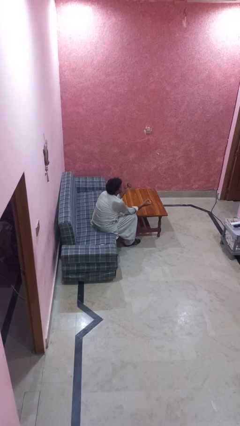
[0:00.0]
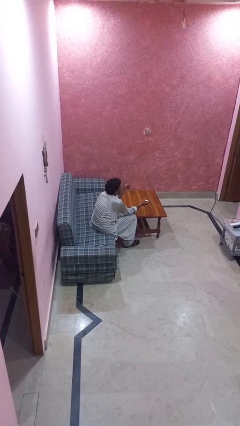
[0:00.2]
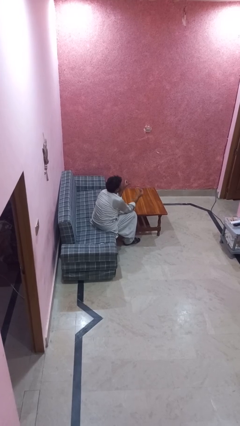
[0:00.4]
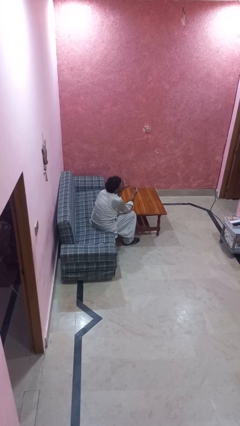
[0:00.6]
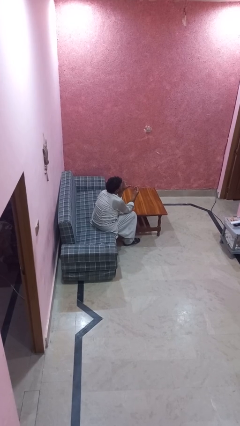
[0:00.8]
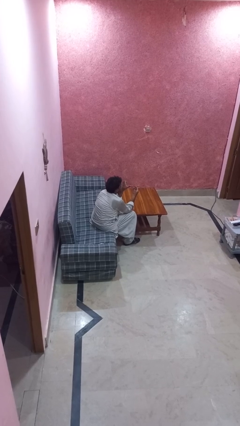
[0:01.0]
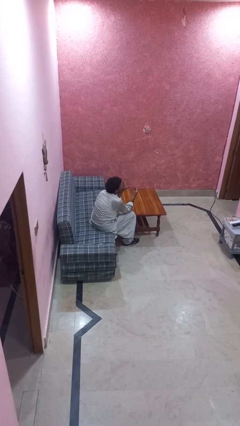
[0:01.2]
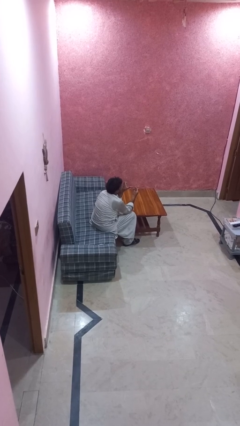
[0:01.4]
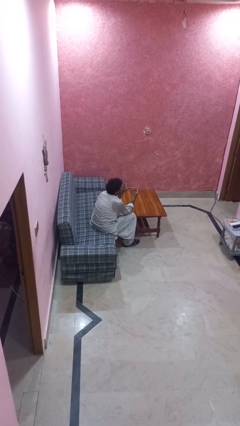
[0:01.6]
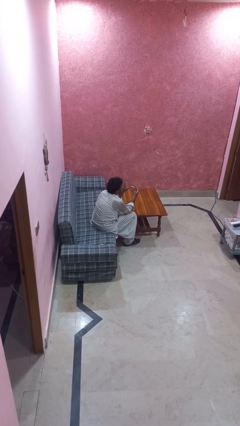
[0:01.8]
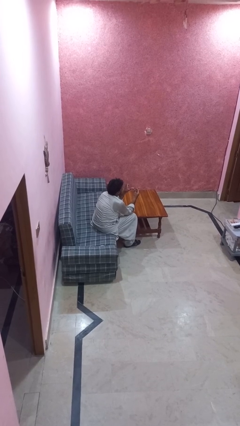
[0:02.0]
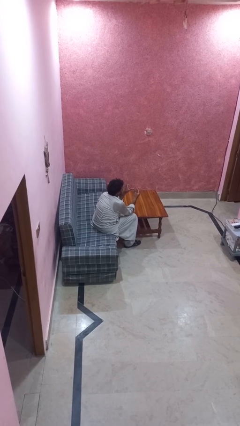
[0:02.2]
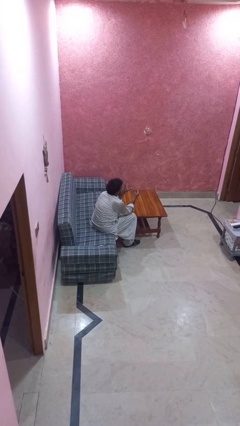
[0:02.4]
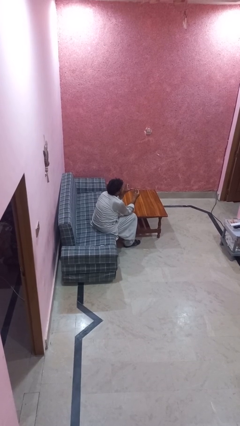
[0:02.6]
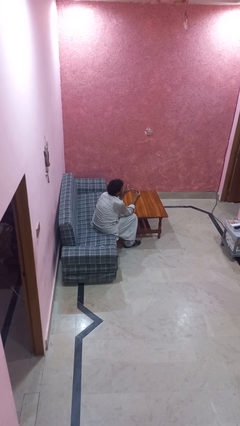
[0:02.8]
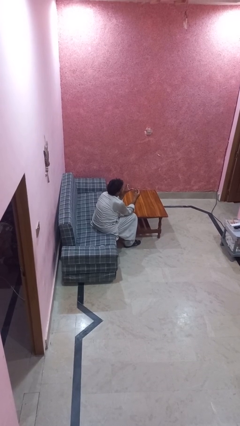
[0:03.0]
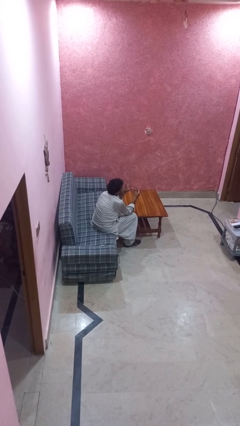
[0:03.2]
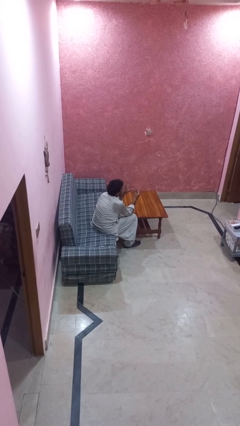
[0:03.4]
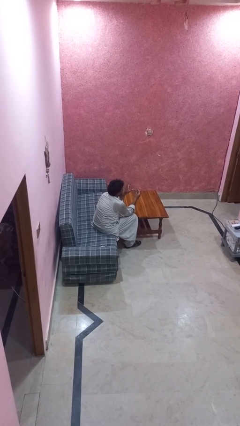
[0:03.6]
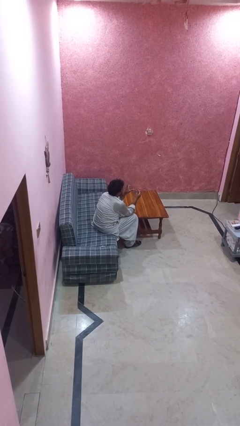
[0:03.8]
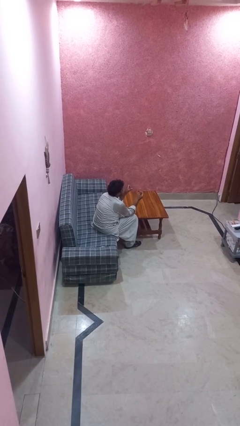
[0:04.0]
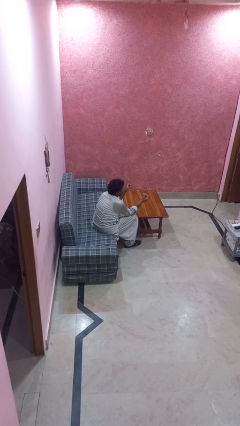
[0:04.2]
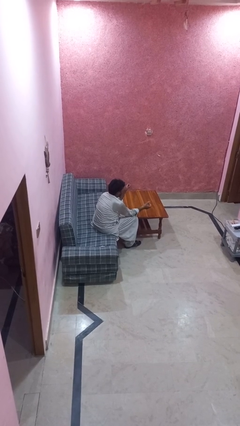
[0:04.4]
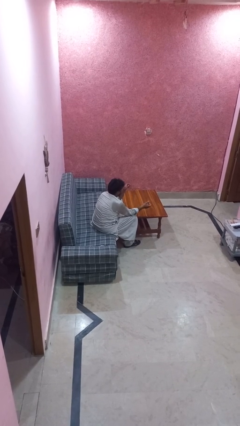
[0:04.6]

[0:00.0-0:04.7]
person clips fingernails

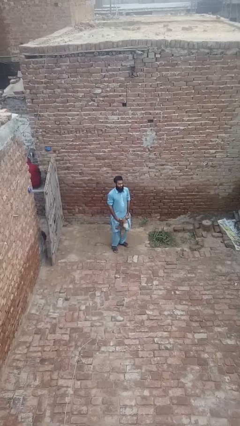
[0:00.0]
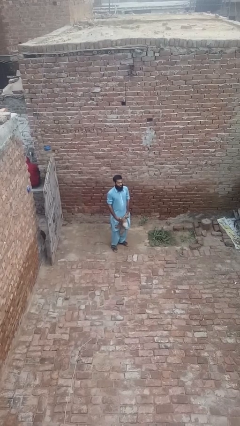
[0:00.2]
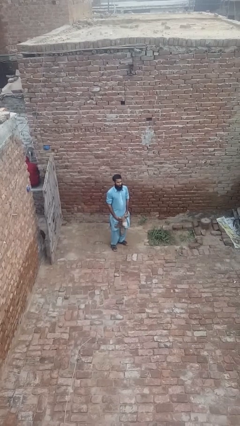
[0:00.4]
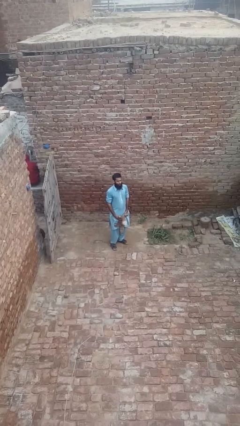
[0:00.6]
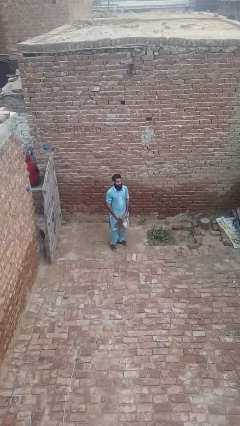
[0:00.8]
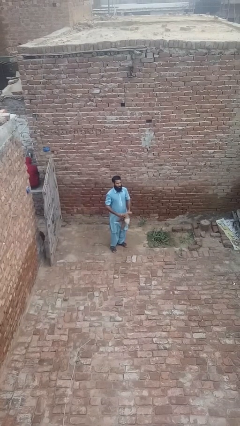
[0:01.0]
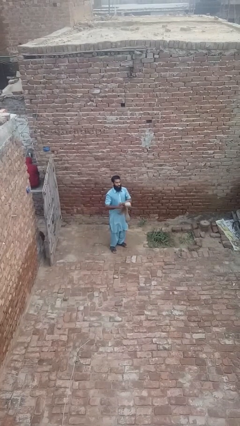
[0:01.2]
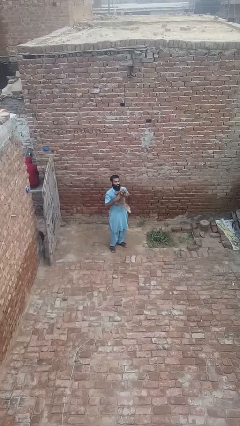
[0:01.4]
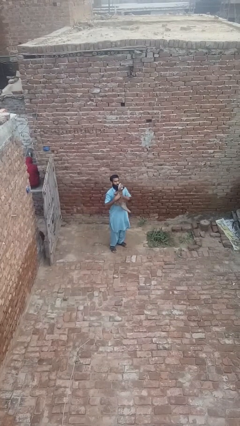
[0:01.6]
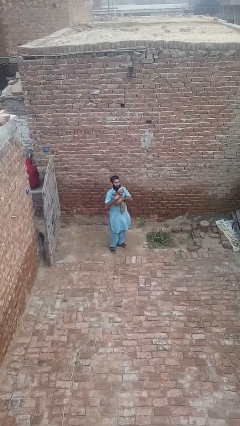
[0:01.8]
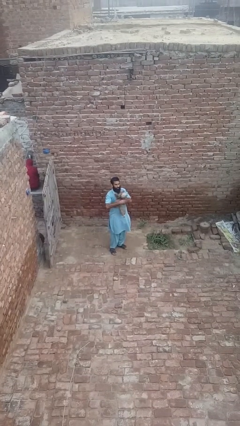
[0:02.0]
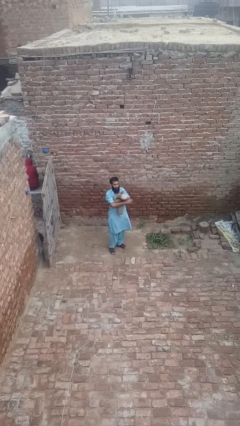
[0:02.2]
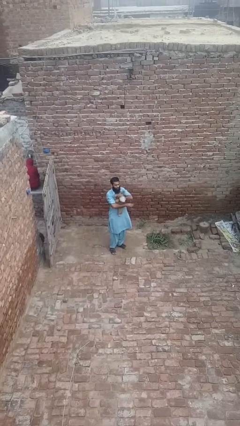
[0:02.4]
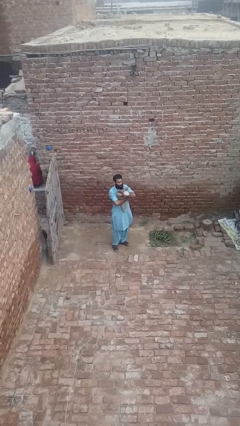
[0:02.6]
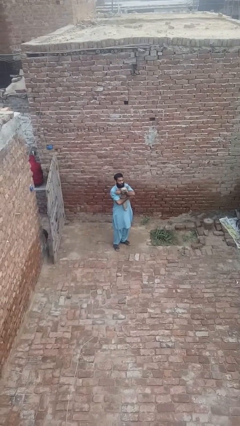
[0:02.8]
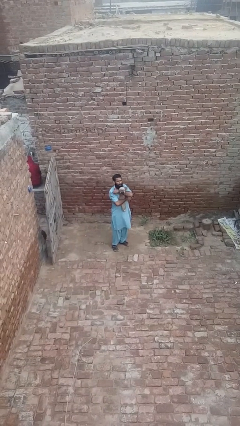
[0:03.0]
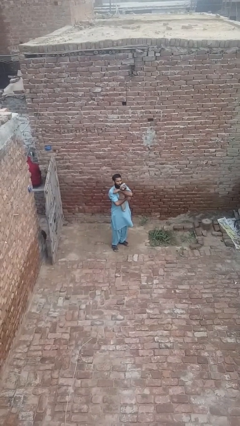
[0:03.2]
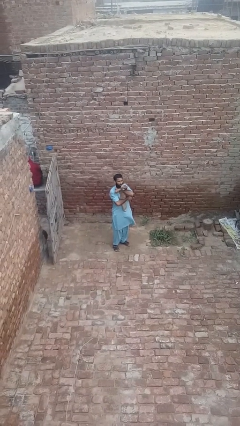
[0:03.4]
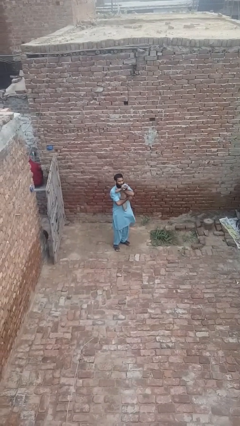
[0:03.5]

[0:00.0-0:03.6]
person hugs stuffed animal

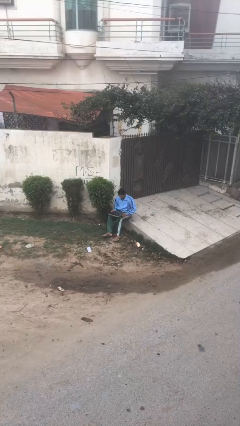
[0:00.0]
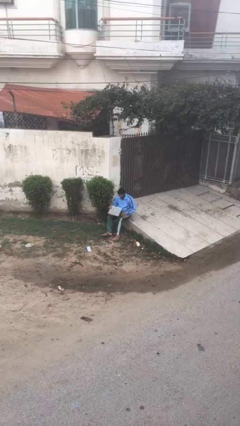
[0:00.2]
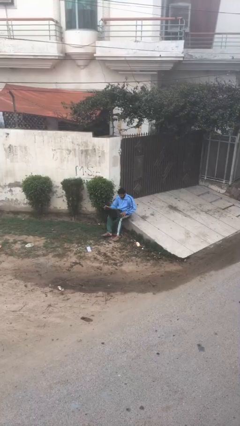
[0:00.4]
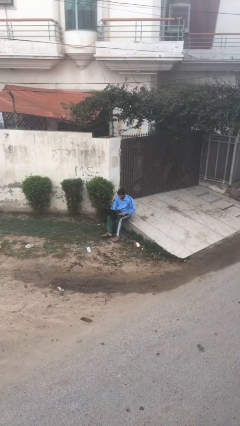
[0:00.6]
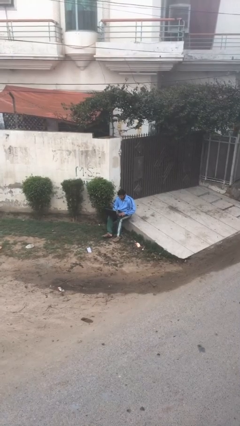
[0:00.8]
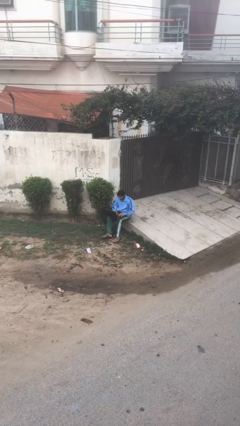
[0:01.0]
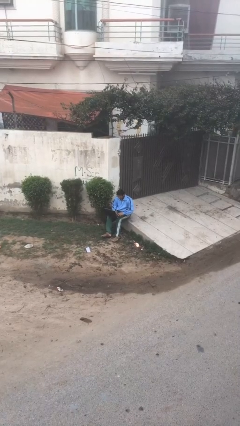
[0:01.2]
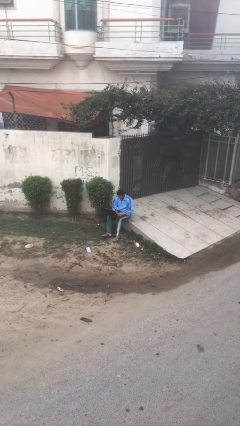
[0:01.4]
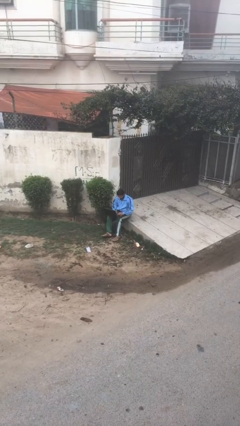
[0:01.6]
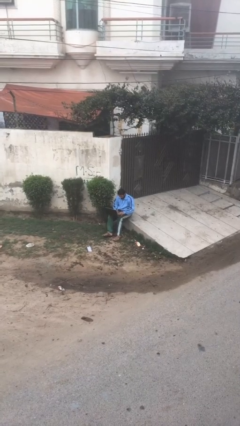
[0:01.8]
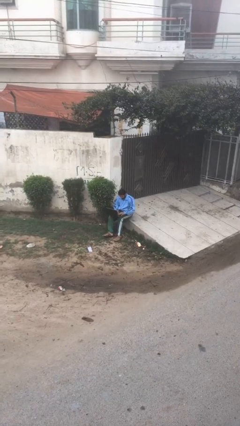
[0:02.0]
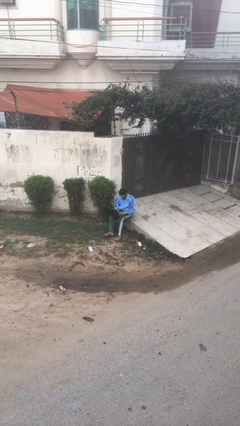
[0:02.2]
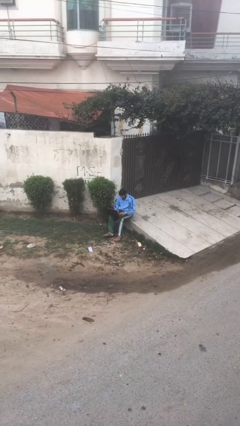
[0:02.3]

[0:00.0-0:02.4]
person interacts with laptop

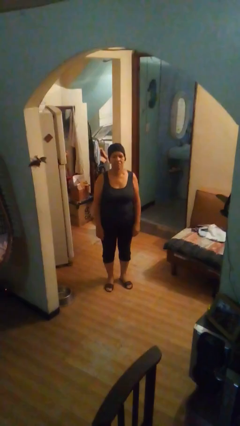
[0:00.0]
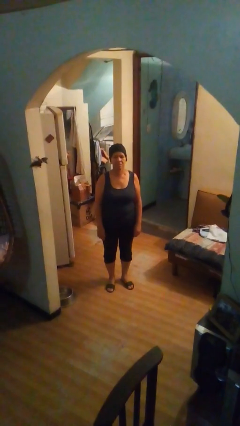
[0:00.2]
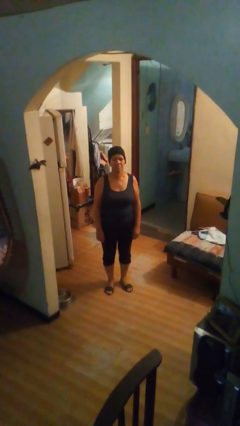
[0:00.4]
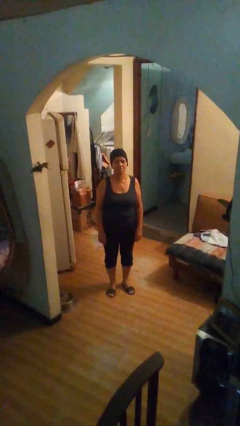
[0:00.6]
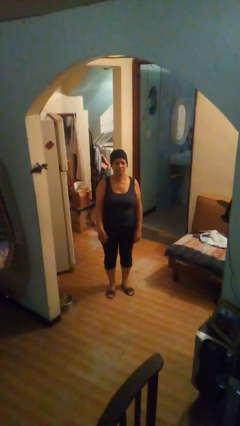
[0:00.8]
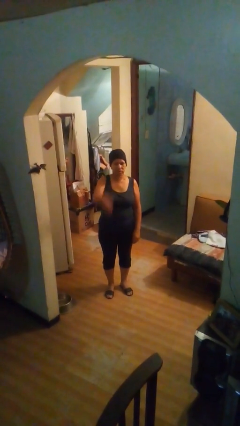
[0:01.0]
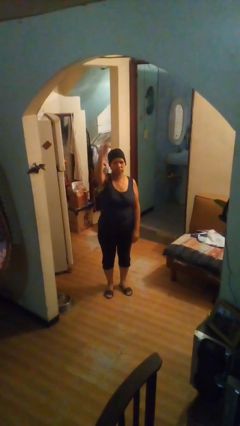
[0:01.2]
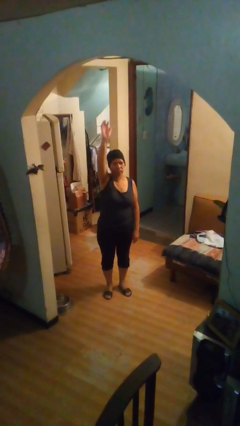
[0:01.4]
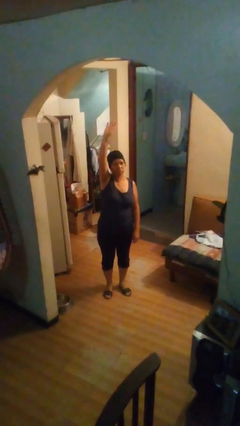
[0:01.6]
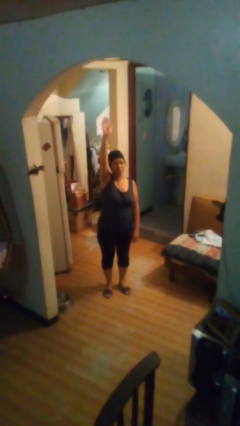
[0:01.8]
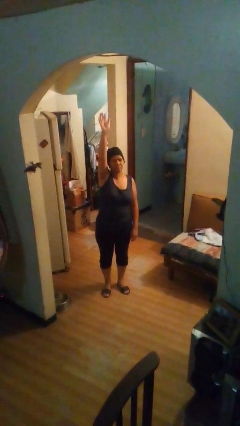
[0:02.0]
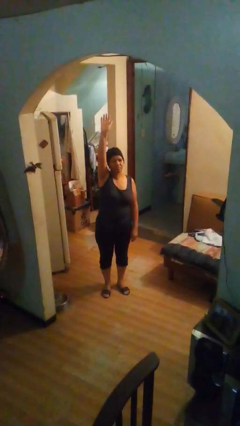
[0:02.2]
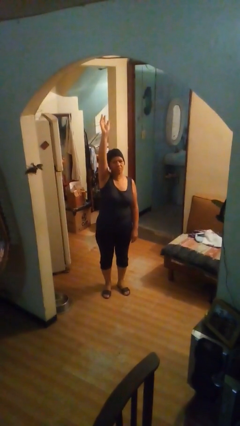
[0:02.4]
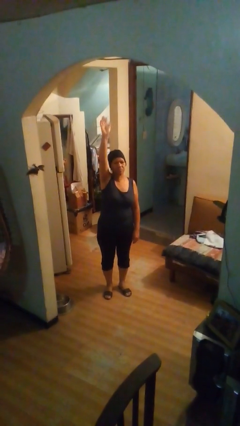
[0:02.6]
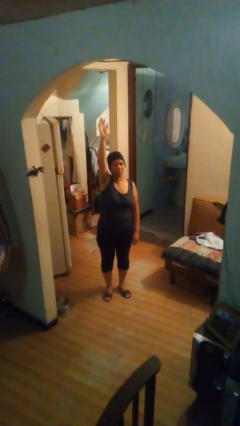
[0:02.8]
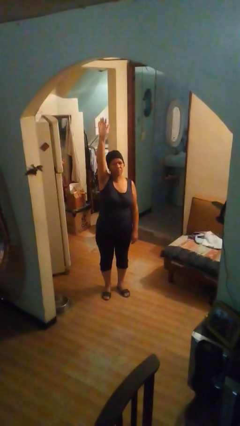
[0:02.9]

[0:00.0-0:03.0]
person gestures raise hand

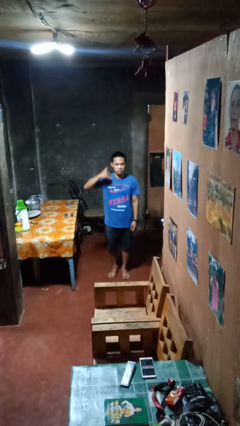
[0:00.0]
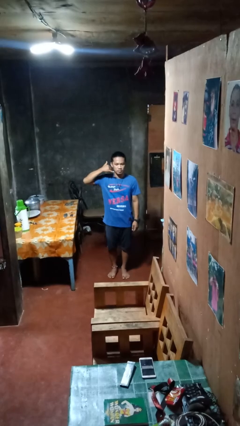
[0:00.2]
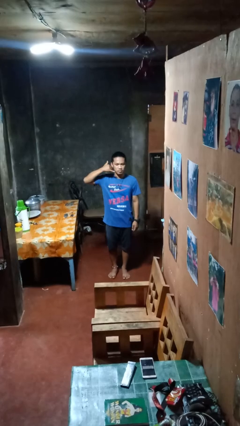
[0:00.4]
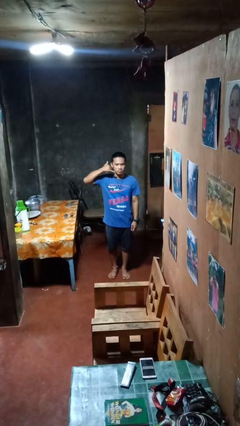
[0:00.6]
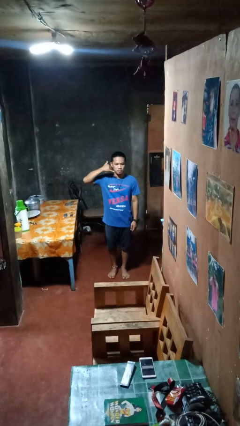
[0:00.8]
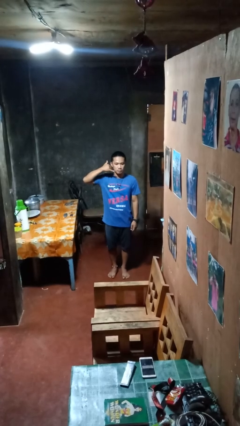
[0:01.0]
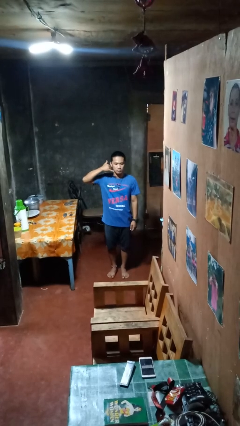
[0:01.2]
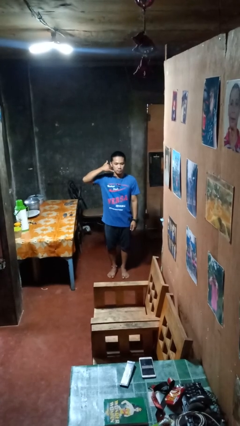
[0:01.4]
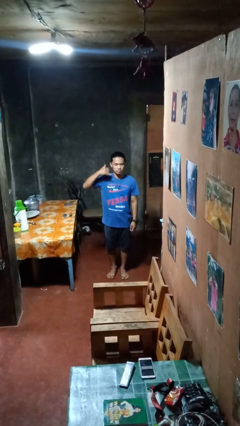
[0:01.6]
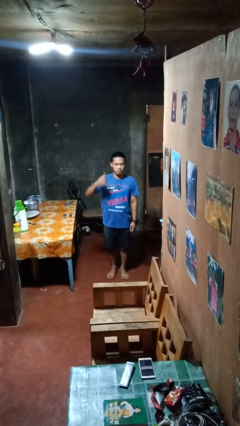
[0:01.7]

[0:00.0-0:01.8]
person gestures call me

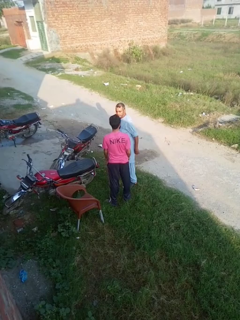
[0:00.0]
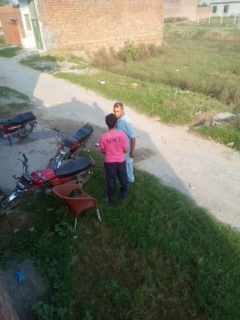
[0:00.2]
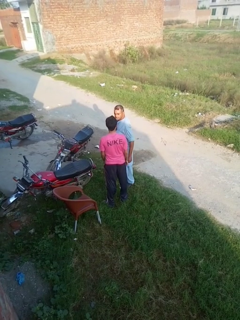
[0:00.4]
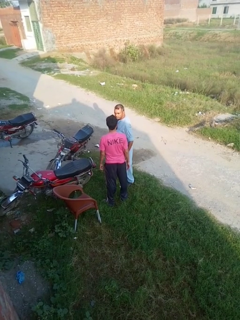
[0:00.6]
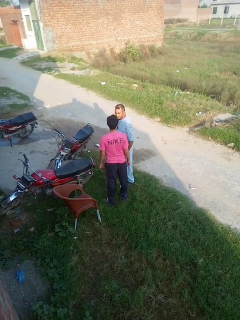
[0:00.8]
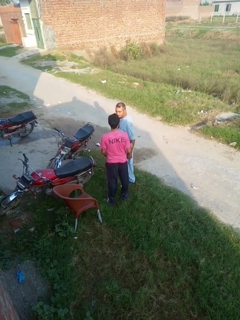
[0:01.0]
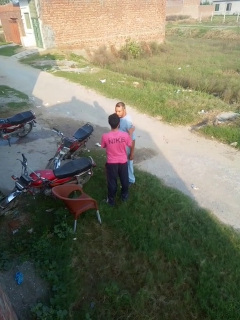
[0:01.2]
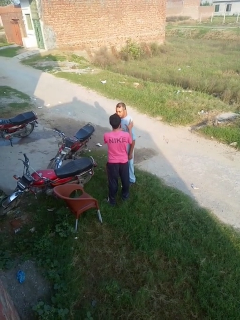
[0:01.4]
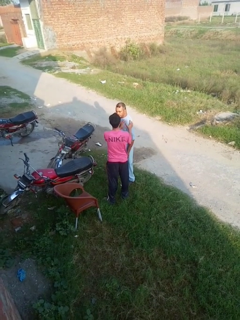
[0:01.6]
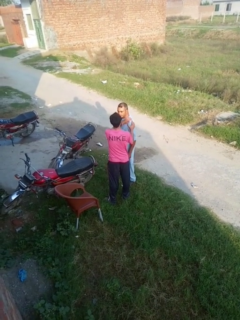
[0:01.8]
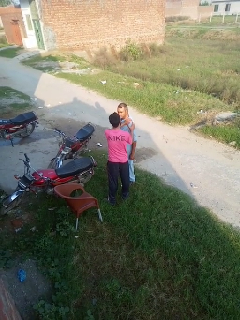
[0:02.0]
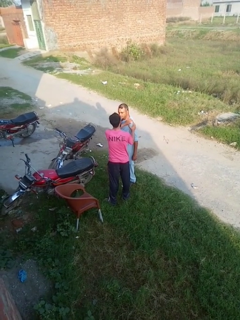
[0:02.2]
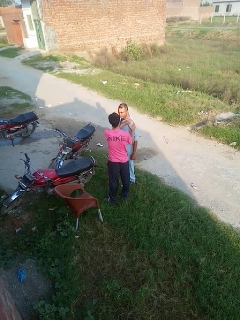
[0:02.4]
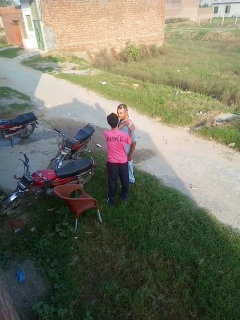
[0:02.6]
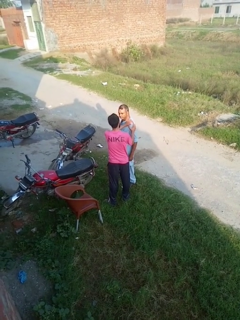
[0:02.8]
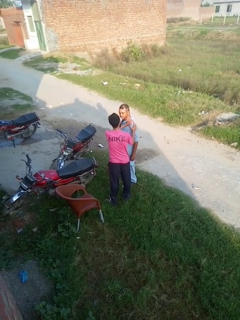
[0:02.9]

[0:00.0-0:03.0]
person grabs person by shoulder
